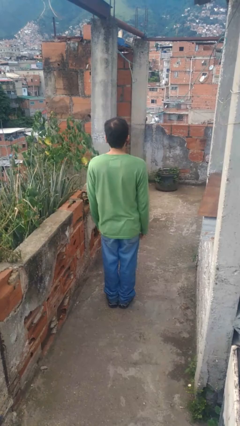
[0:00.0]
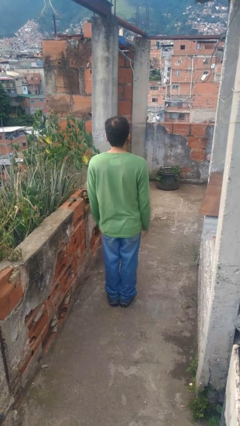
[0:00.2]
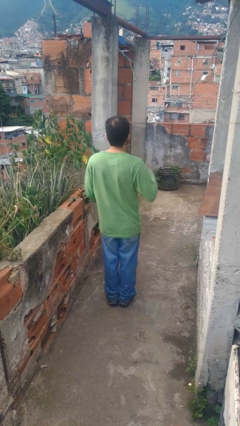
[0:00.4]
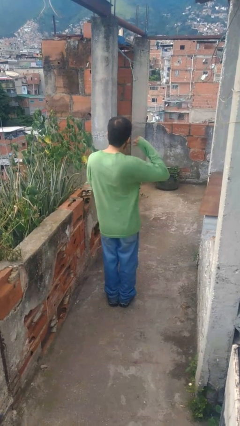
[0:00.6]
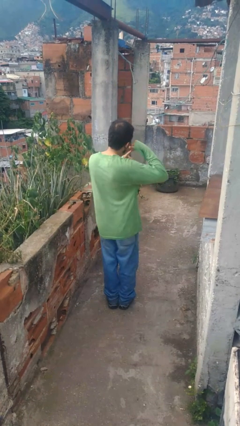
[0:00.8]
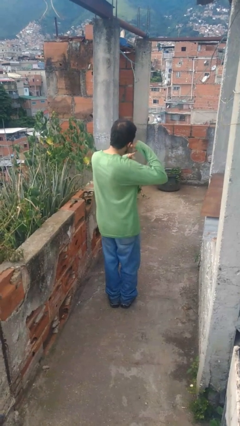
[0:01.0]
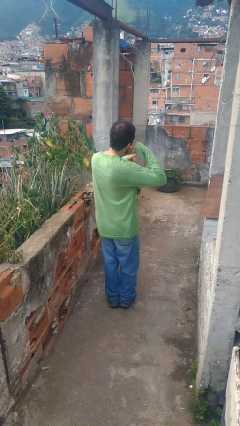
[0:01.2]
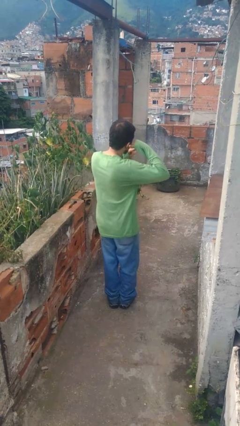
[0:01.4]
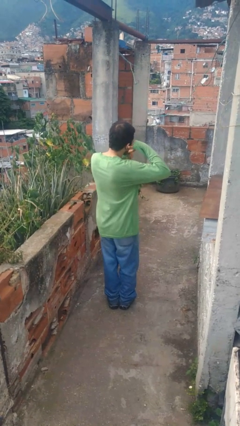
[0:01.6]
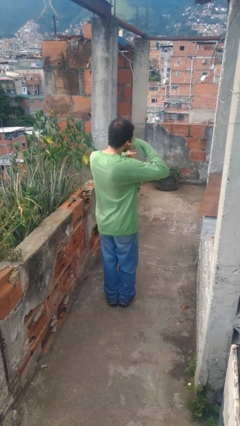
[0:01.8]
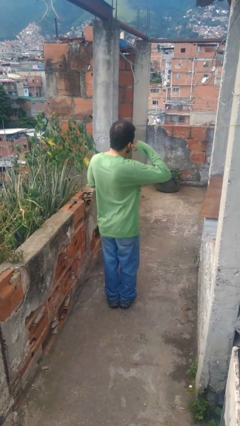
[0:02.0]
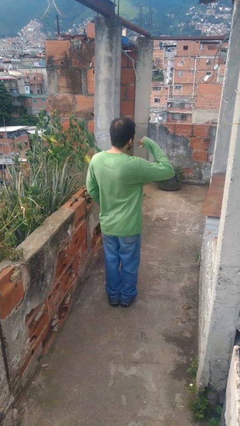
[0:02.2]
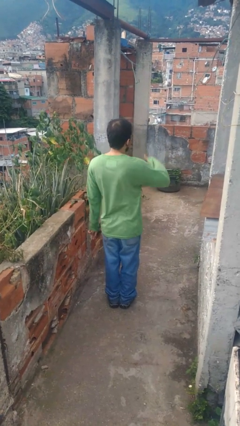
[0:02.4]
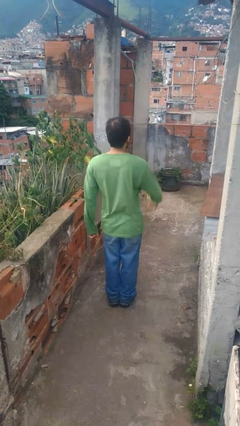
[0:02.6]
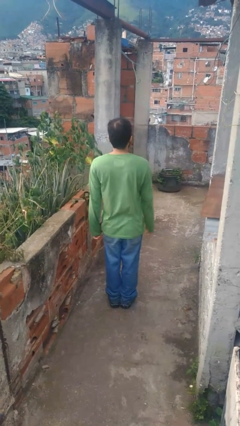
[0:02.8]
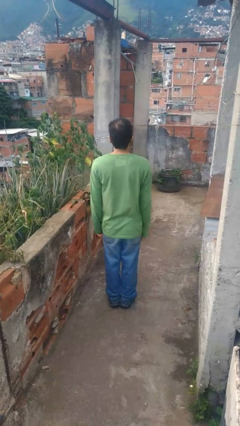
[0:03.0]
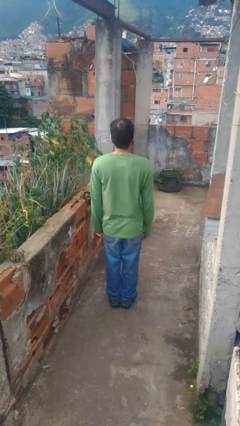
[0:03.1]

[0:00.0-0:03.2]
person gestures call me

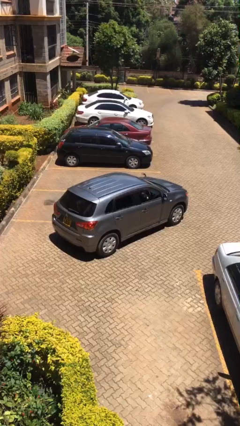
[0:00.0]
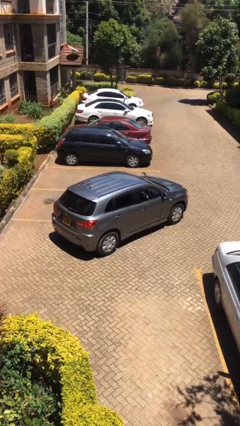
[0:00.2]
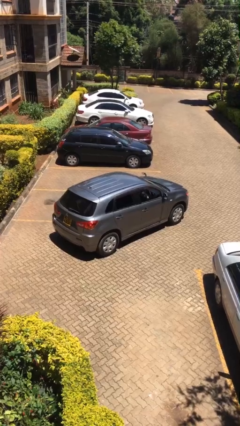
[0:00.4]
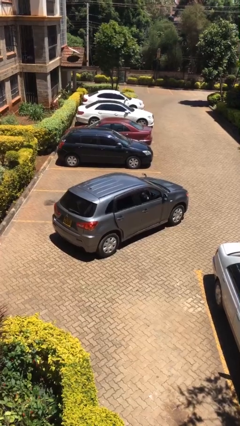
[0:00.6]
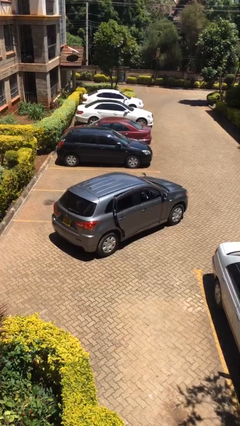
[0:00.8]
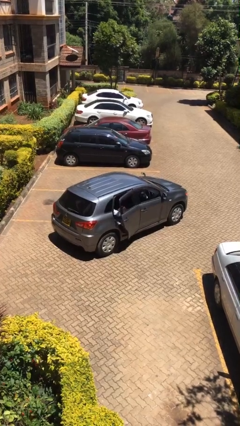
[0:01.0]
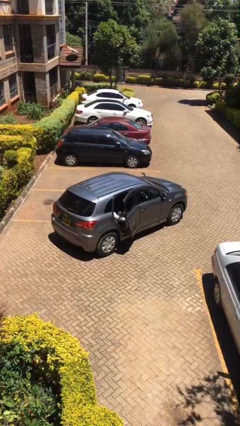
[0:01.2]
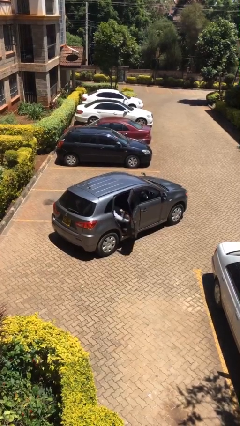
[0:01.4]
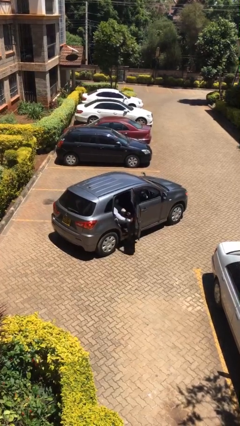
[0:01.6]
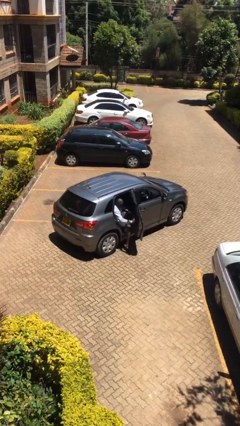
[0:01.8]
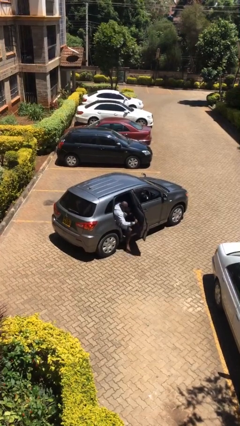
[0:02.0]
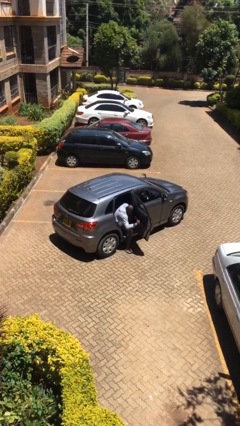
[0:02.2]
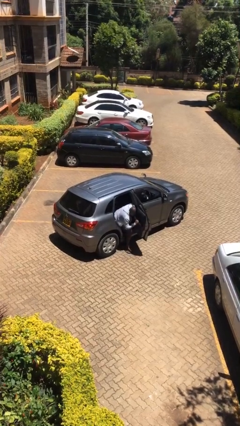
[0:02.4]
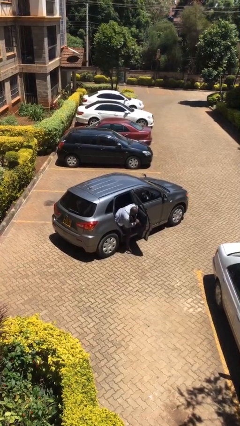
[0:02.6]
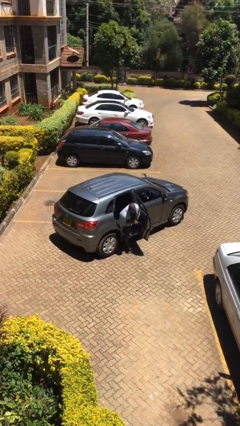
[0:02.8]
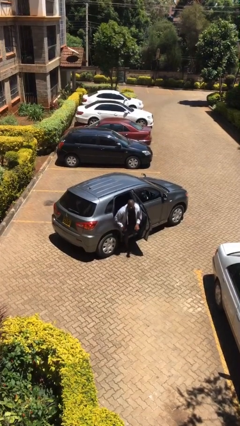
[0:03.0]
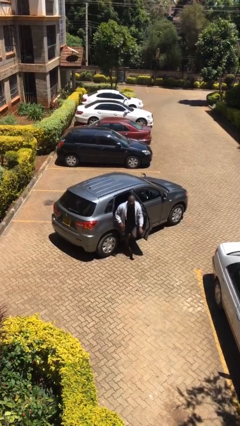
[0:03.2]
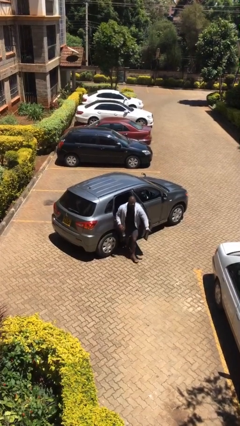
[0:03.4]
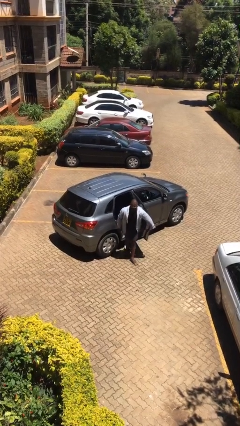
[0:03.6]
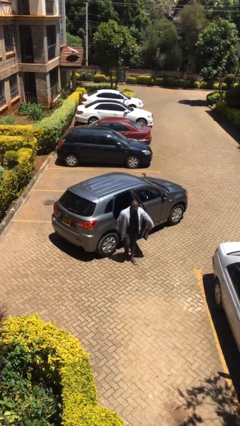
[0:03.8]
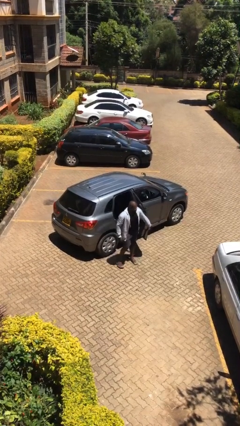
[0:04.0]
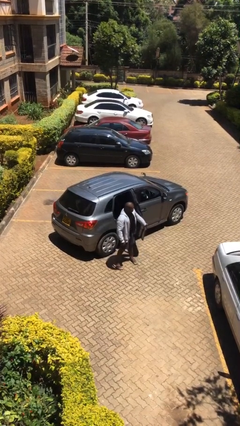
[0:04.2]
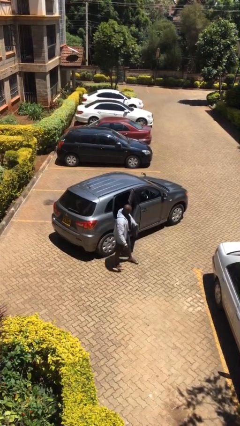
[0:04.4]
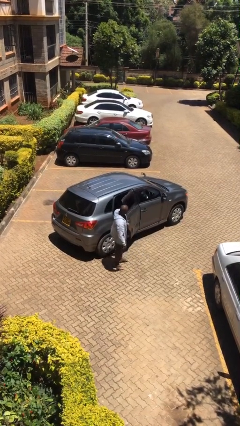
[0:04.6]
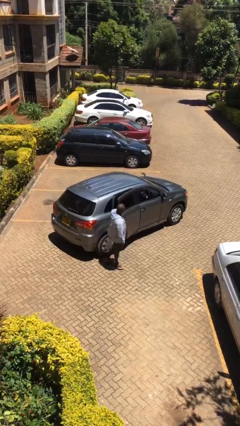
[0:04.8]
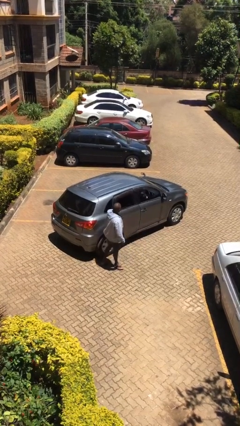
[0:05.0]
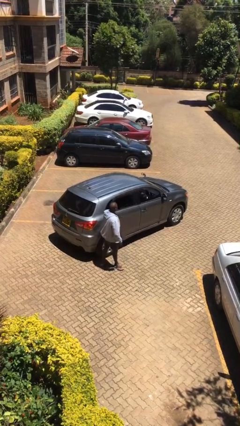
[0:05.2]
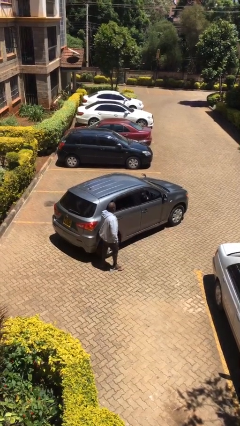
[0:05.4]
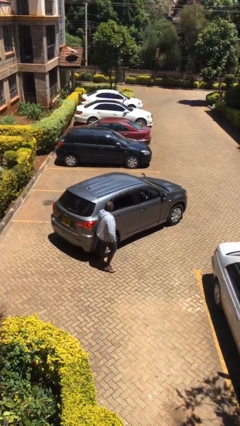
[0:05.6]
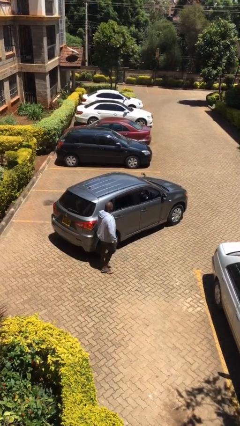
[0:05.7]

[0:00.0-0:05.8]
car drops off person

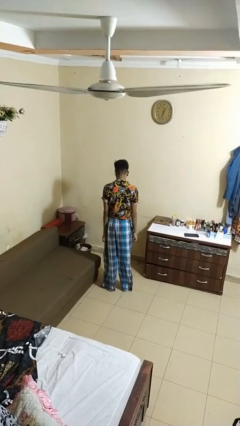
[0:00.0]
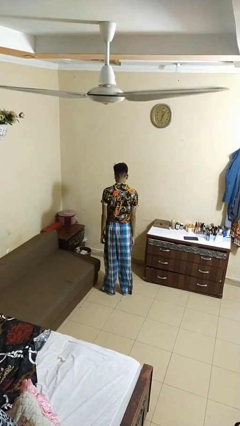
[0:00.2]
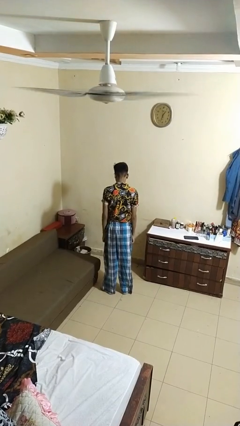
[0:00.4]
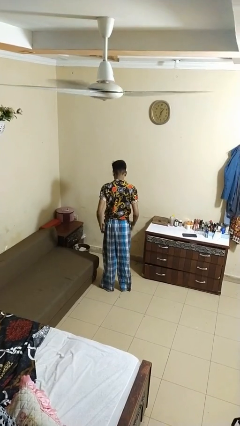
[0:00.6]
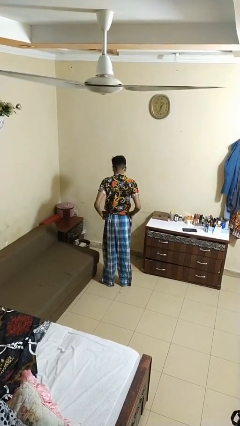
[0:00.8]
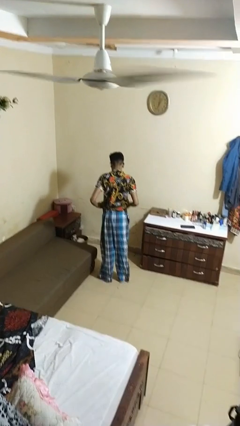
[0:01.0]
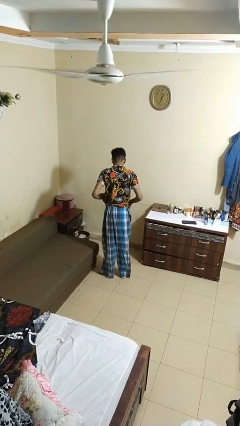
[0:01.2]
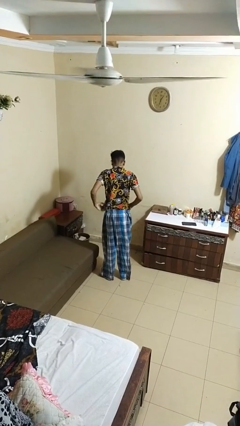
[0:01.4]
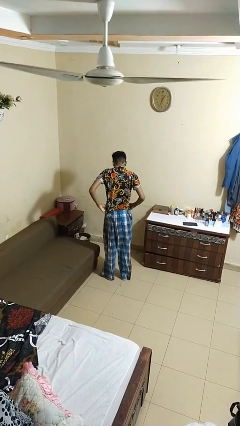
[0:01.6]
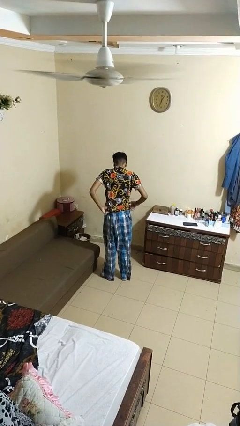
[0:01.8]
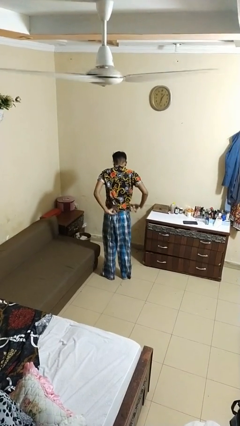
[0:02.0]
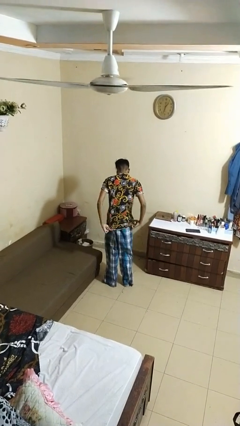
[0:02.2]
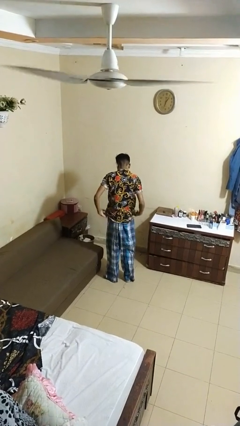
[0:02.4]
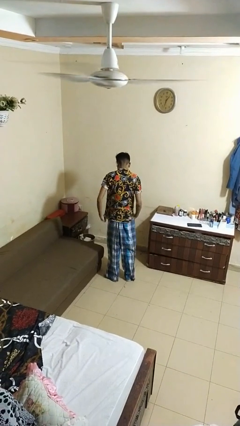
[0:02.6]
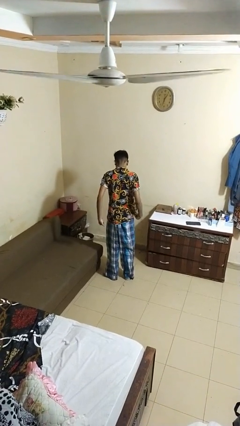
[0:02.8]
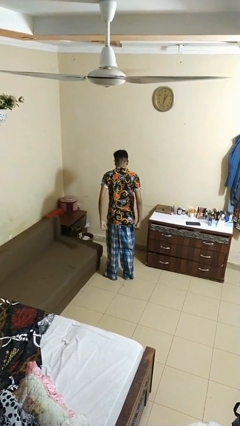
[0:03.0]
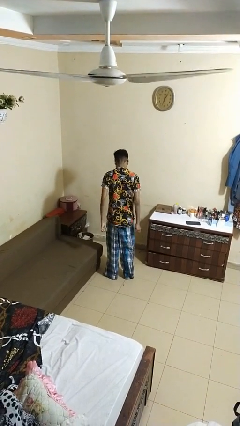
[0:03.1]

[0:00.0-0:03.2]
person untucks shirt

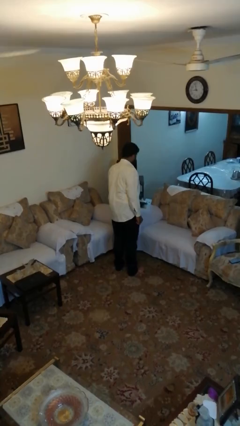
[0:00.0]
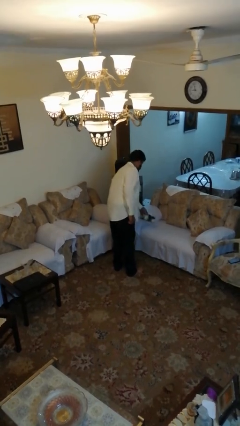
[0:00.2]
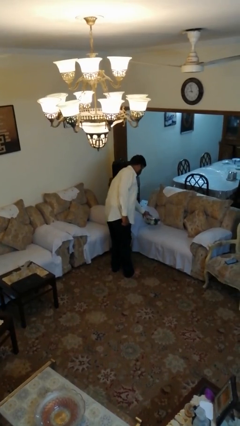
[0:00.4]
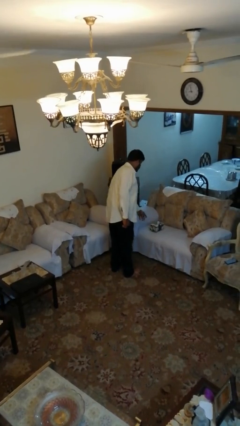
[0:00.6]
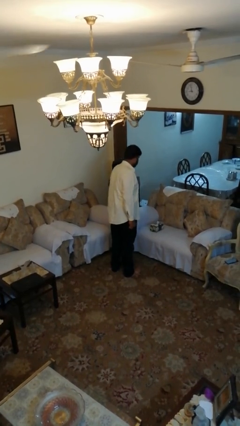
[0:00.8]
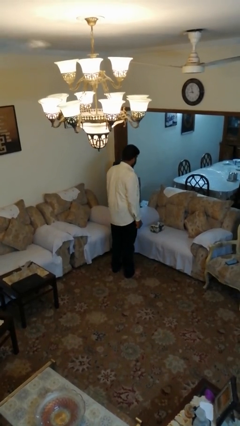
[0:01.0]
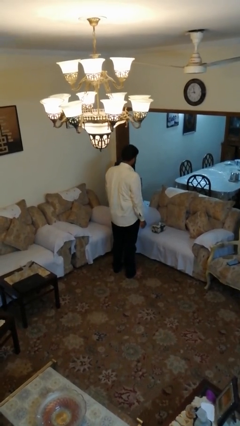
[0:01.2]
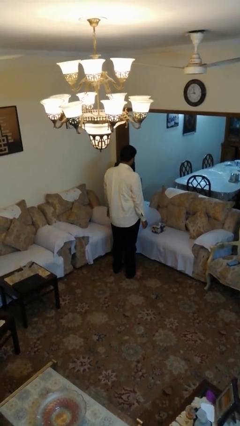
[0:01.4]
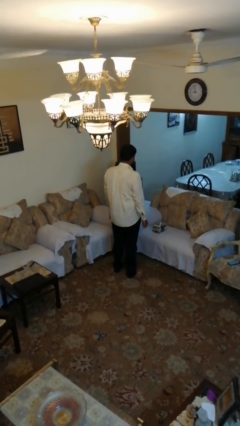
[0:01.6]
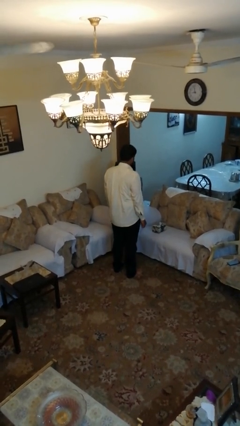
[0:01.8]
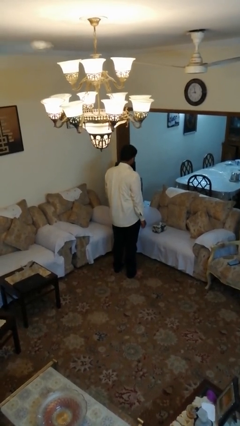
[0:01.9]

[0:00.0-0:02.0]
person puts down object on couch

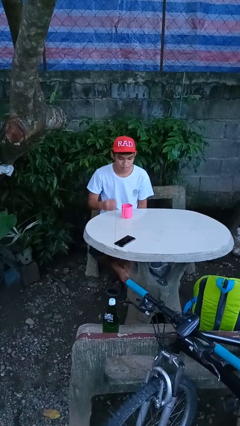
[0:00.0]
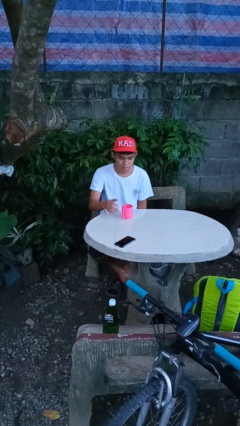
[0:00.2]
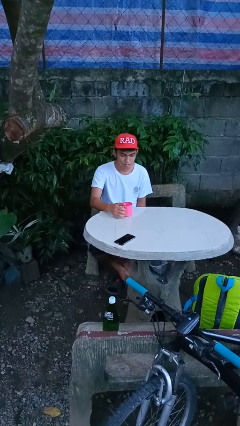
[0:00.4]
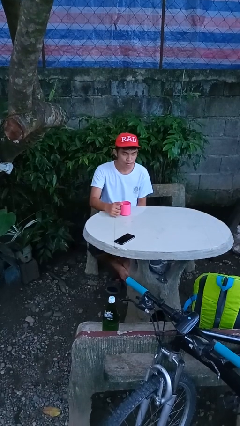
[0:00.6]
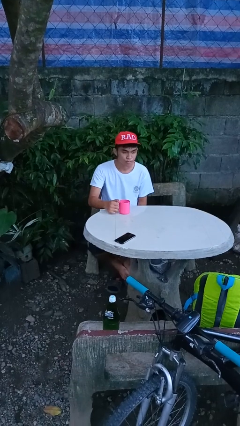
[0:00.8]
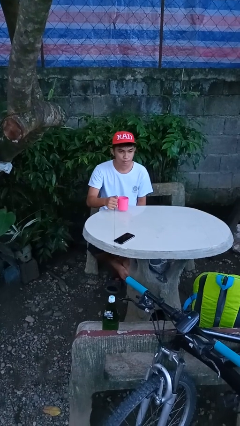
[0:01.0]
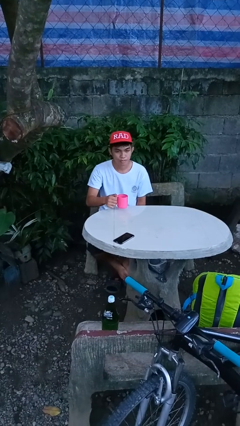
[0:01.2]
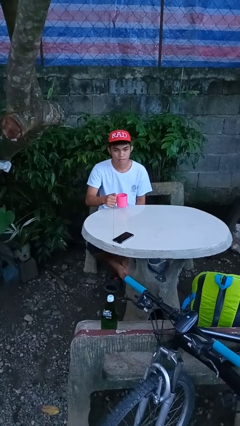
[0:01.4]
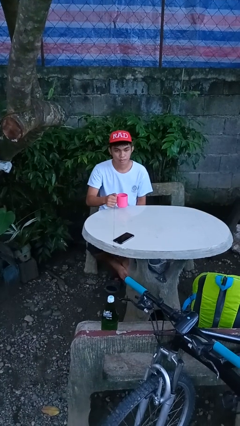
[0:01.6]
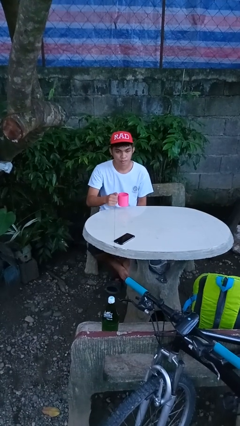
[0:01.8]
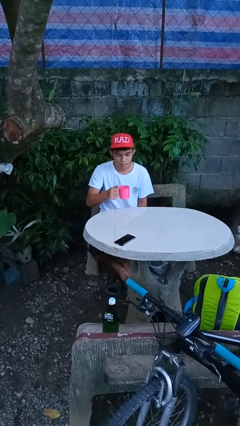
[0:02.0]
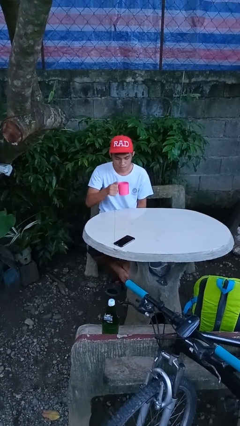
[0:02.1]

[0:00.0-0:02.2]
person picks up object from table

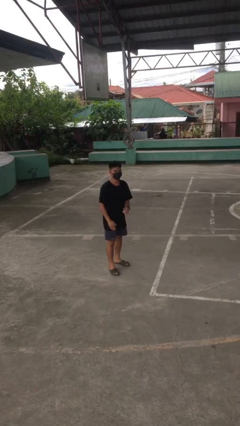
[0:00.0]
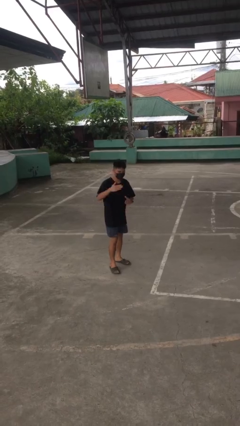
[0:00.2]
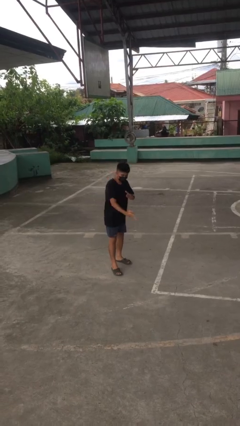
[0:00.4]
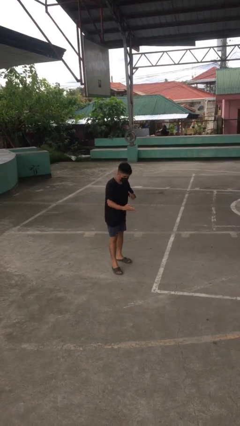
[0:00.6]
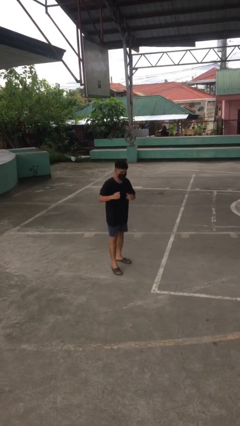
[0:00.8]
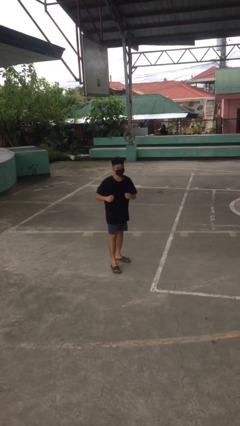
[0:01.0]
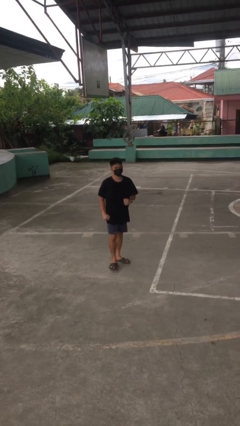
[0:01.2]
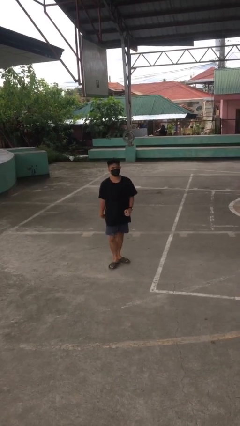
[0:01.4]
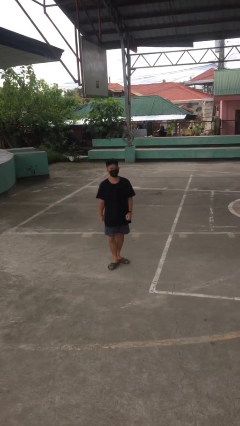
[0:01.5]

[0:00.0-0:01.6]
person karate chop
